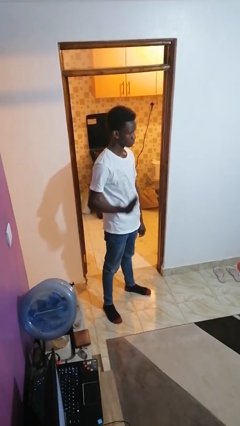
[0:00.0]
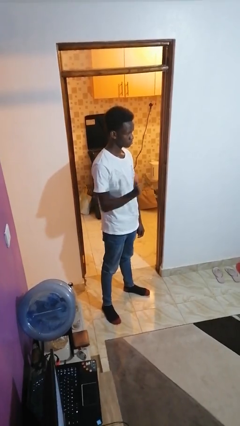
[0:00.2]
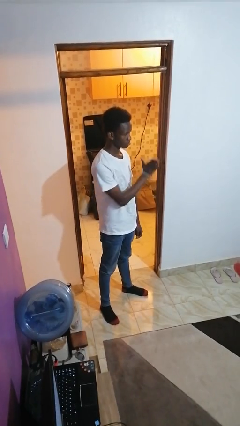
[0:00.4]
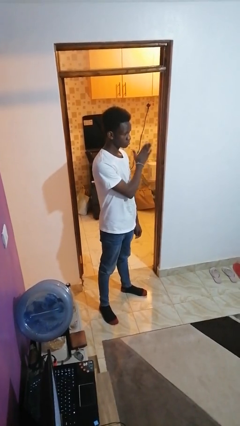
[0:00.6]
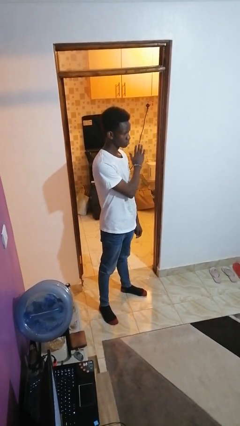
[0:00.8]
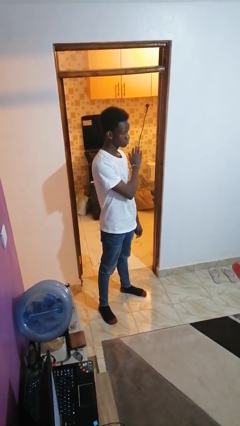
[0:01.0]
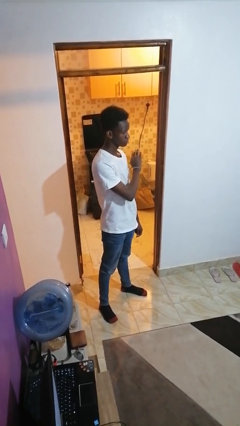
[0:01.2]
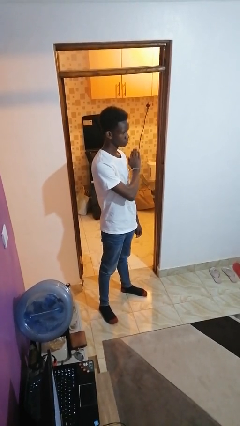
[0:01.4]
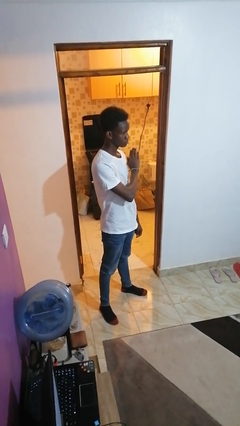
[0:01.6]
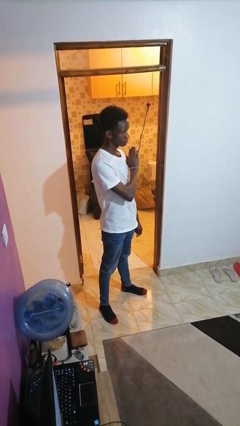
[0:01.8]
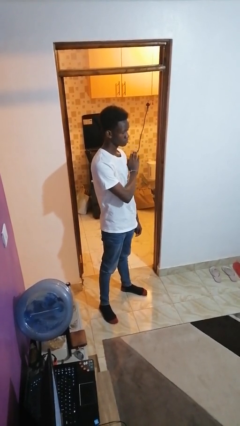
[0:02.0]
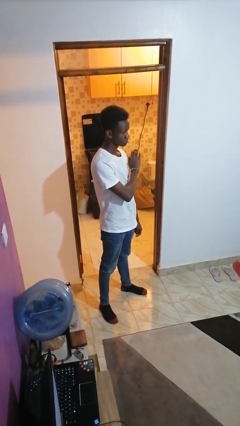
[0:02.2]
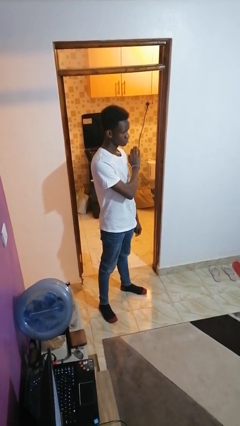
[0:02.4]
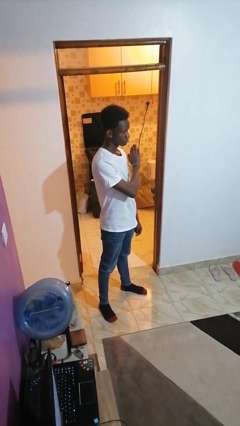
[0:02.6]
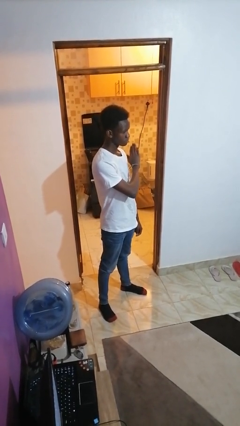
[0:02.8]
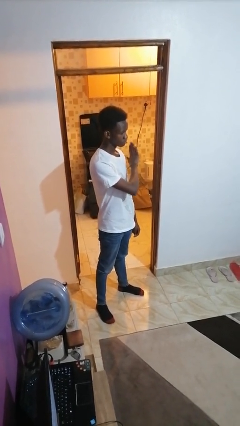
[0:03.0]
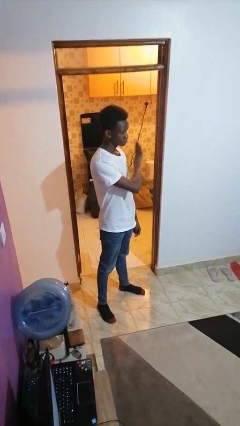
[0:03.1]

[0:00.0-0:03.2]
person gestures swipe left

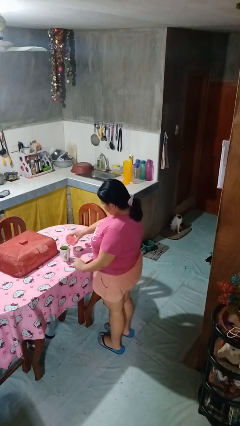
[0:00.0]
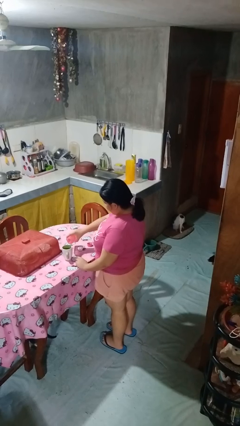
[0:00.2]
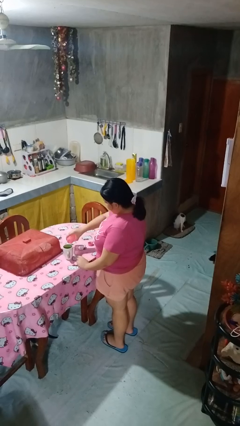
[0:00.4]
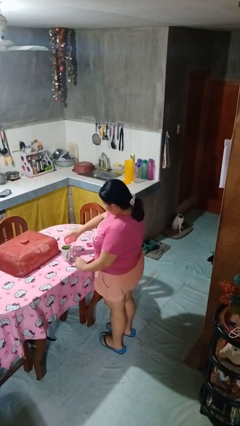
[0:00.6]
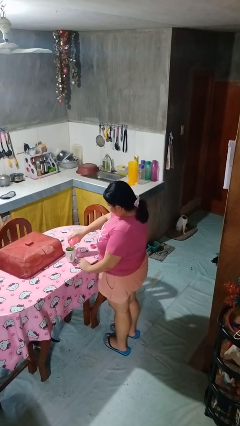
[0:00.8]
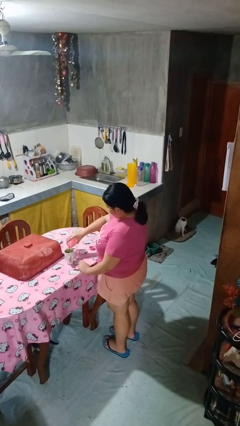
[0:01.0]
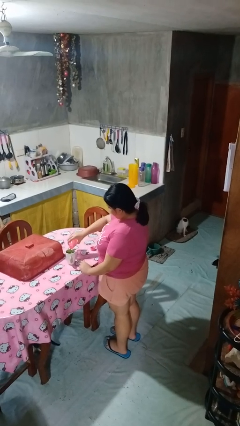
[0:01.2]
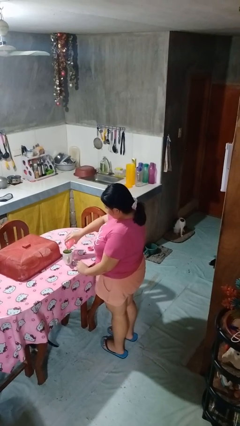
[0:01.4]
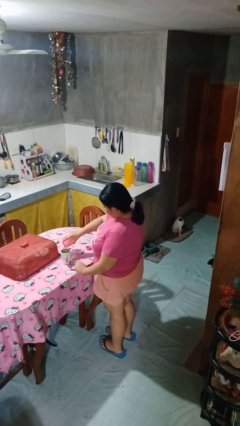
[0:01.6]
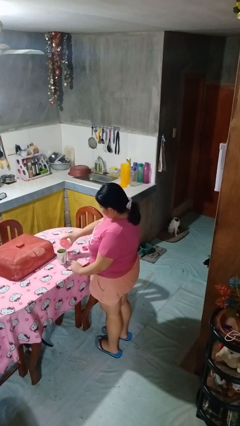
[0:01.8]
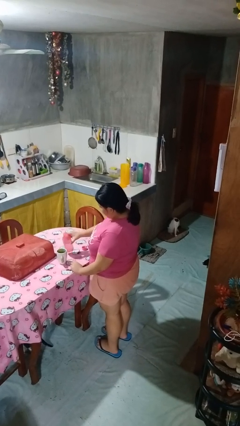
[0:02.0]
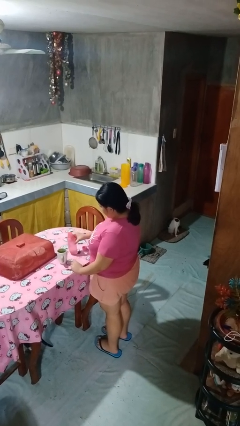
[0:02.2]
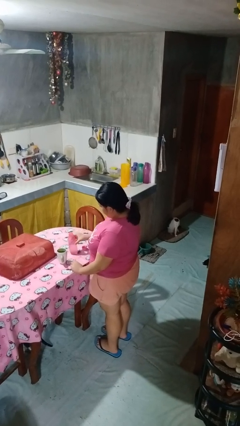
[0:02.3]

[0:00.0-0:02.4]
person pours liquid into cup

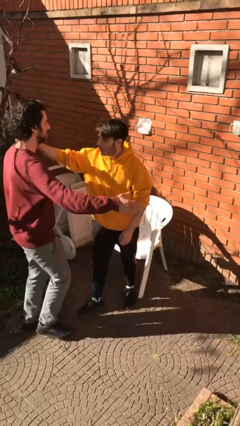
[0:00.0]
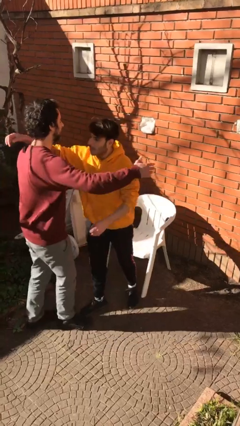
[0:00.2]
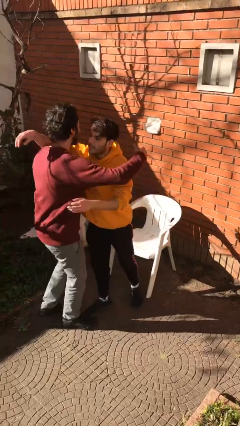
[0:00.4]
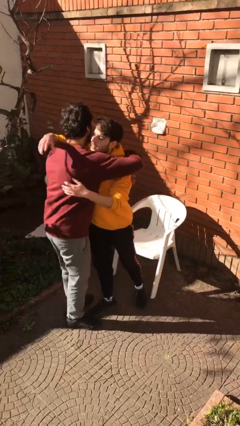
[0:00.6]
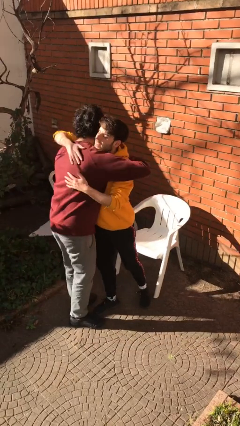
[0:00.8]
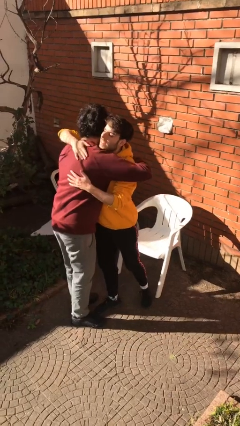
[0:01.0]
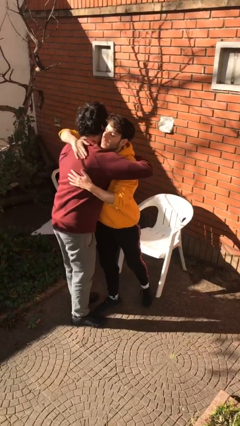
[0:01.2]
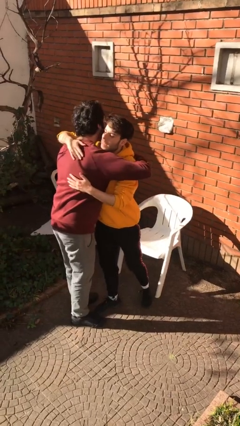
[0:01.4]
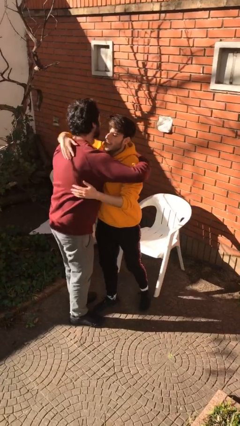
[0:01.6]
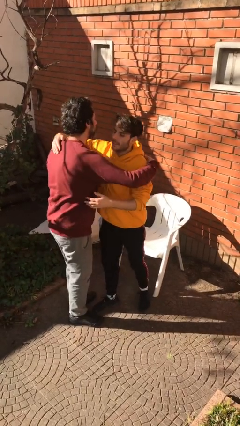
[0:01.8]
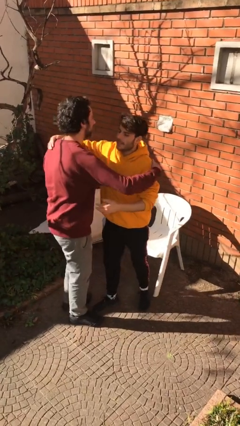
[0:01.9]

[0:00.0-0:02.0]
person embraces person

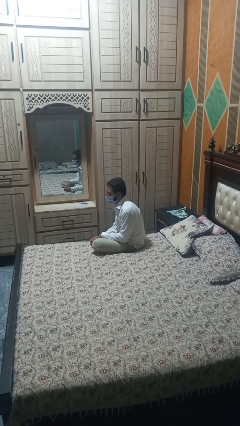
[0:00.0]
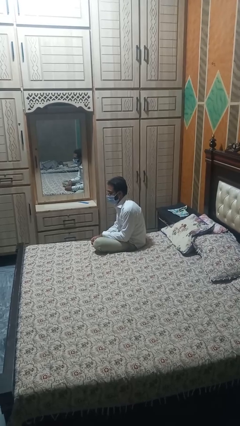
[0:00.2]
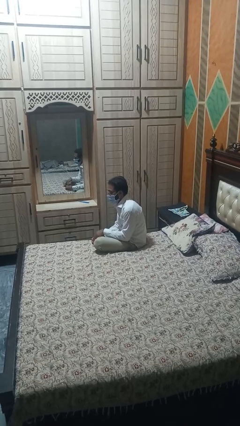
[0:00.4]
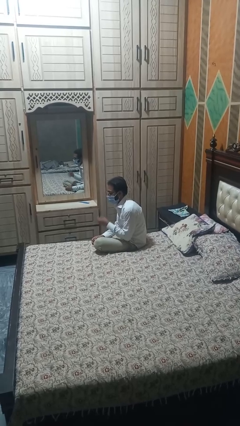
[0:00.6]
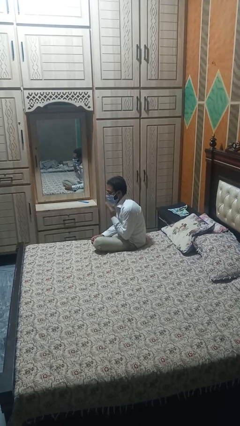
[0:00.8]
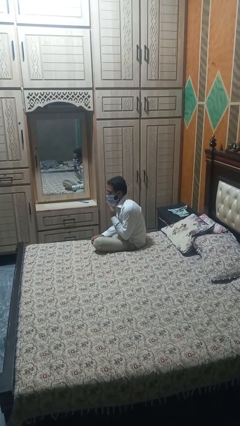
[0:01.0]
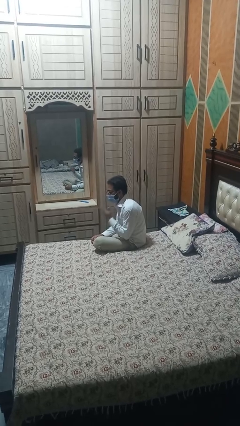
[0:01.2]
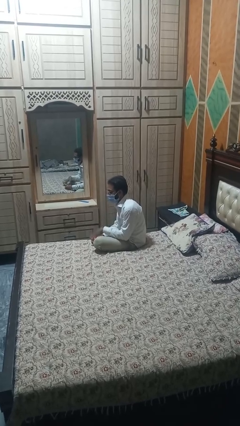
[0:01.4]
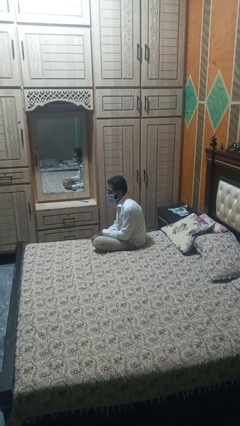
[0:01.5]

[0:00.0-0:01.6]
person strokes chin

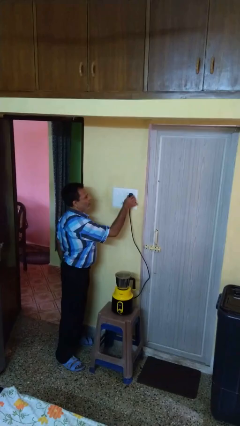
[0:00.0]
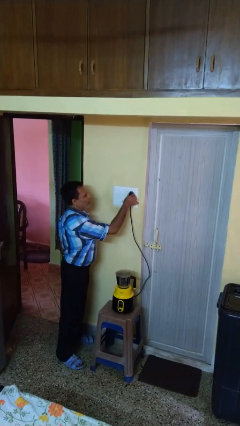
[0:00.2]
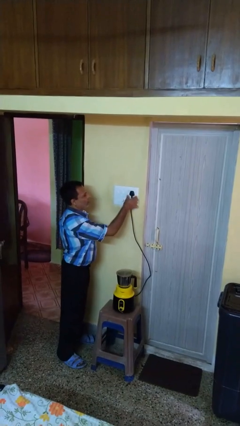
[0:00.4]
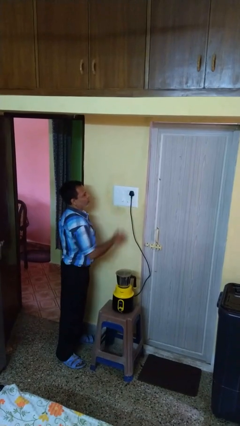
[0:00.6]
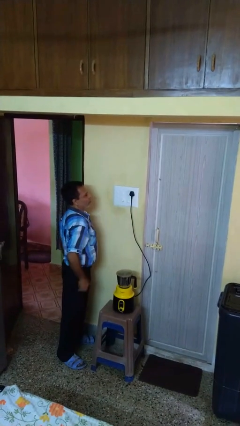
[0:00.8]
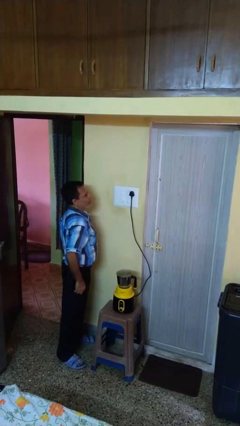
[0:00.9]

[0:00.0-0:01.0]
person plugs into electrical socket

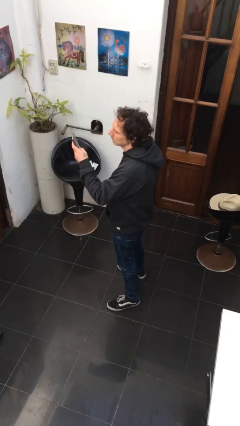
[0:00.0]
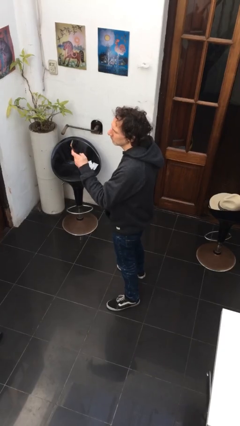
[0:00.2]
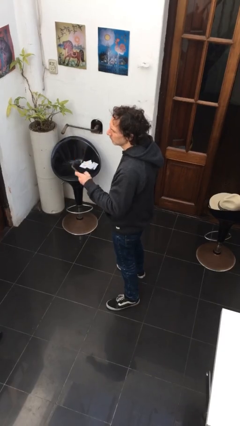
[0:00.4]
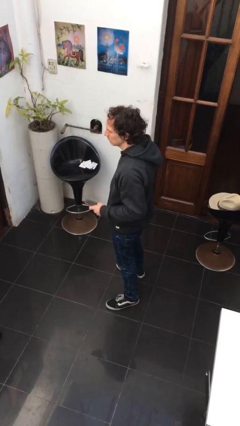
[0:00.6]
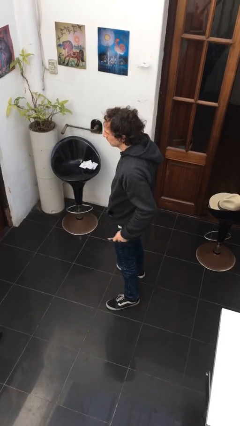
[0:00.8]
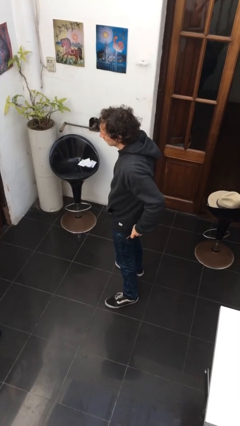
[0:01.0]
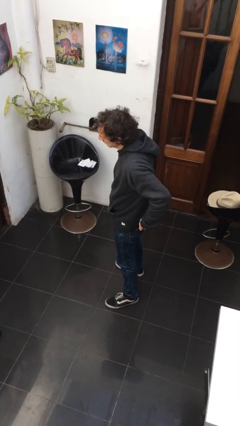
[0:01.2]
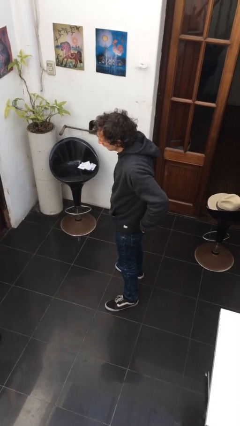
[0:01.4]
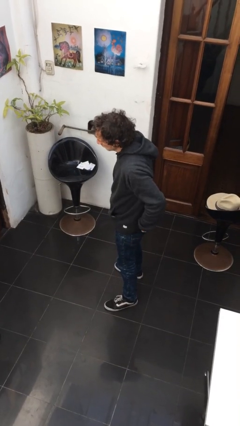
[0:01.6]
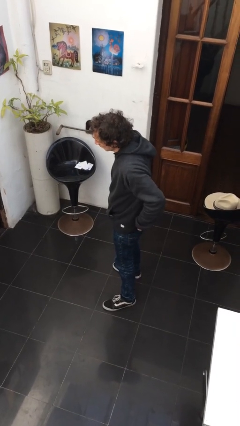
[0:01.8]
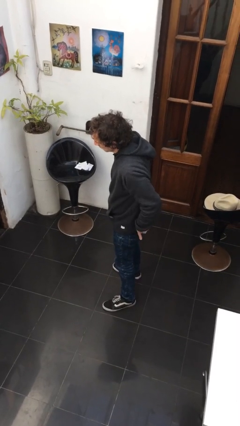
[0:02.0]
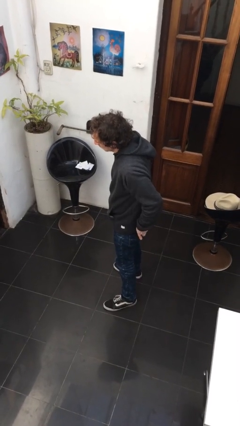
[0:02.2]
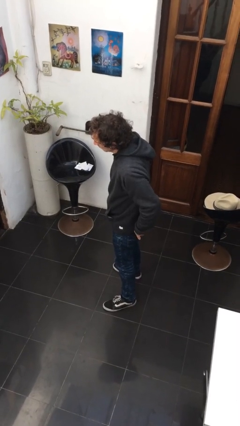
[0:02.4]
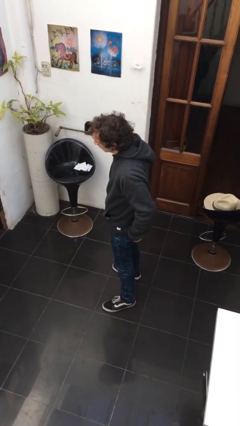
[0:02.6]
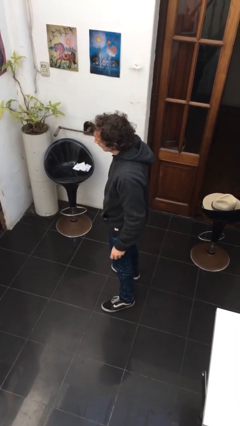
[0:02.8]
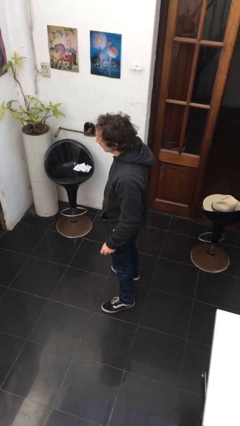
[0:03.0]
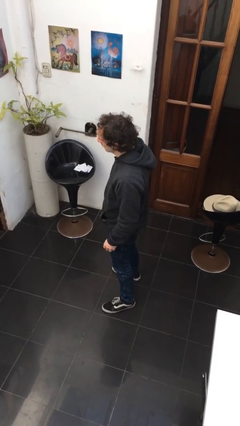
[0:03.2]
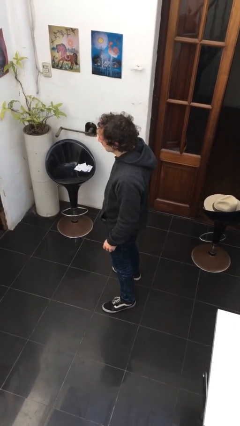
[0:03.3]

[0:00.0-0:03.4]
person puts phone into pocket

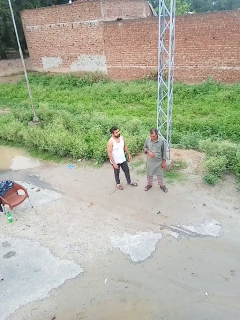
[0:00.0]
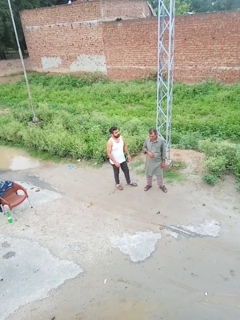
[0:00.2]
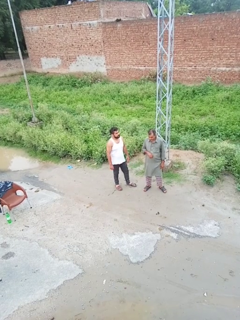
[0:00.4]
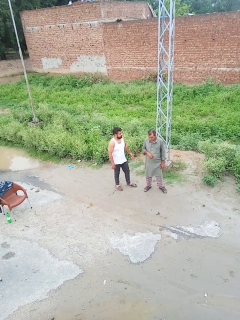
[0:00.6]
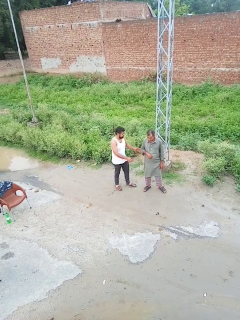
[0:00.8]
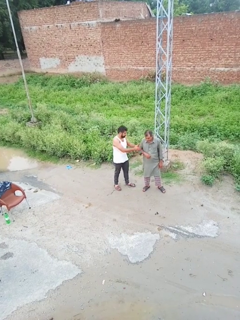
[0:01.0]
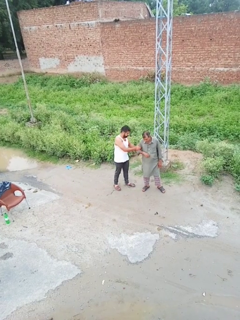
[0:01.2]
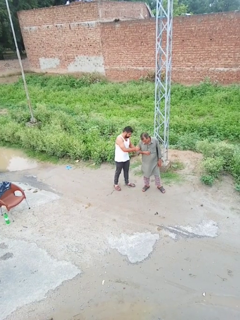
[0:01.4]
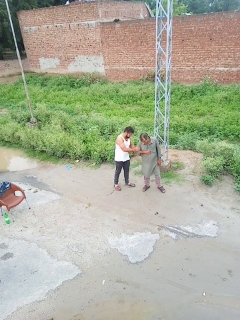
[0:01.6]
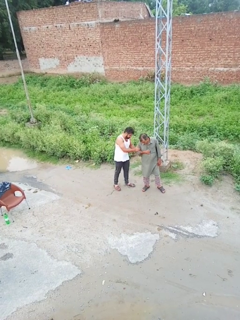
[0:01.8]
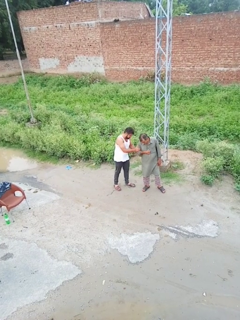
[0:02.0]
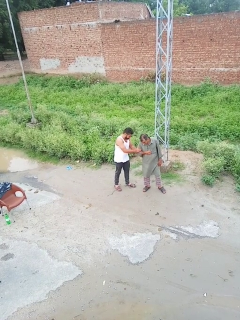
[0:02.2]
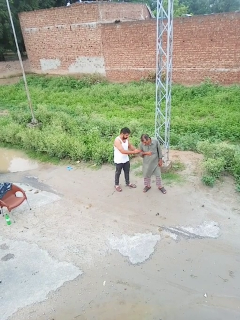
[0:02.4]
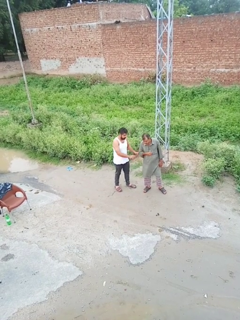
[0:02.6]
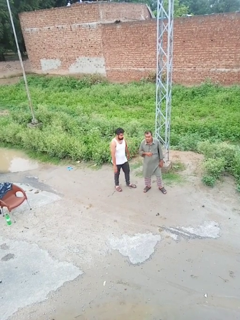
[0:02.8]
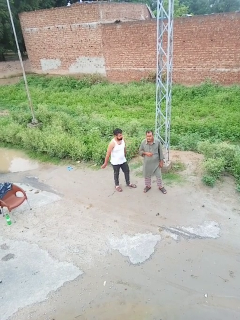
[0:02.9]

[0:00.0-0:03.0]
person grabs person by forearm

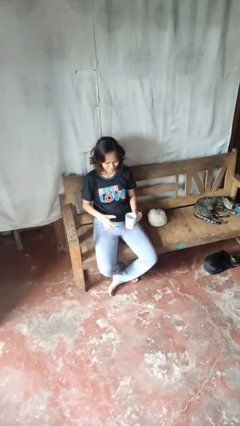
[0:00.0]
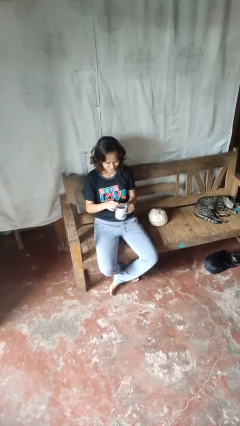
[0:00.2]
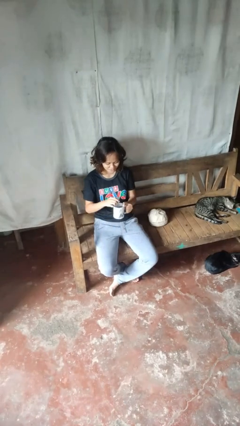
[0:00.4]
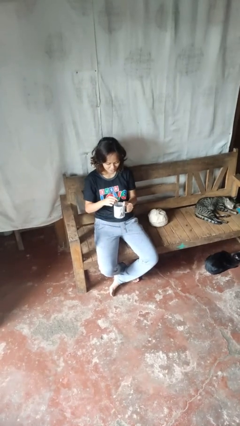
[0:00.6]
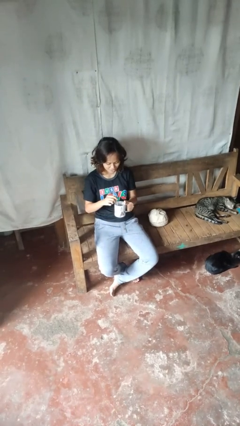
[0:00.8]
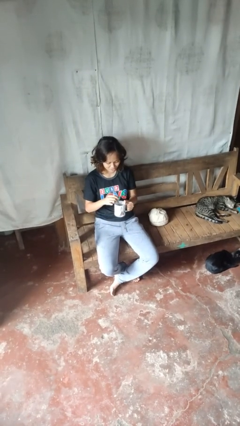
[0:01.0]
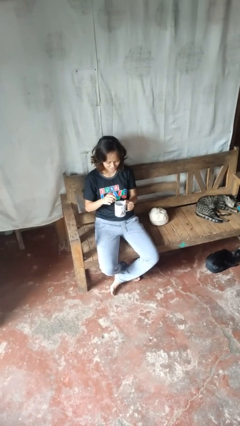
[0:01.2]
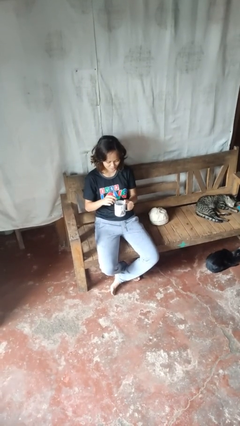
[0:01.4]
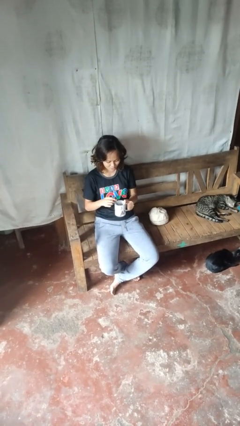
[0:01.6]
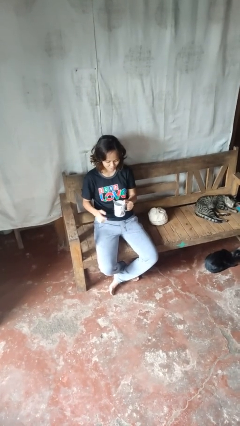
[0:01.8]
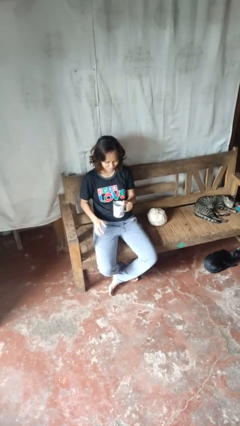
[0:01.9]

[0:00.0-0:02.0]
person stirs mug
